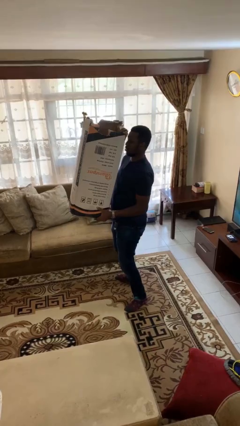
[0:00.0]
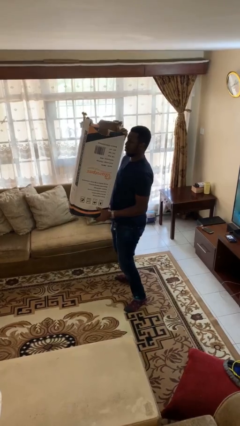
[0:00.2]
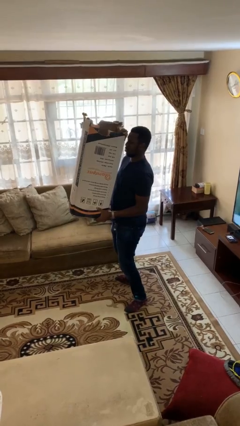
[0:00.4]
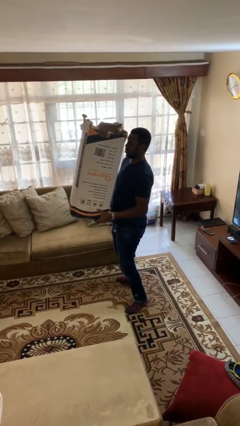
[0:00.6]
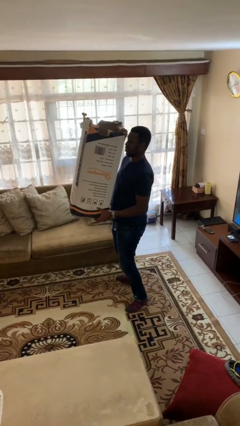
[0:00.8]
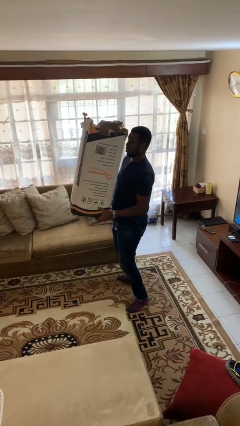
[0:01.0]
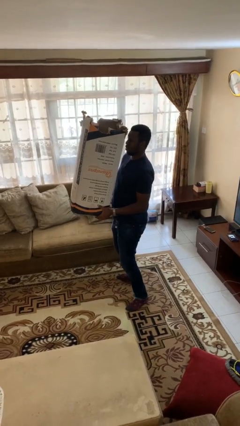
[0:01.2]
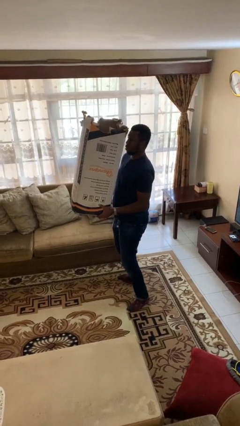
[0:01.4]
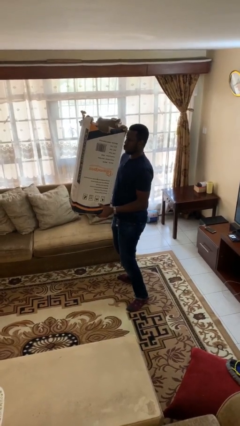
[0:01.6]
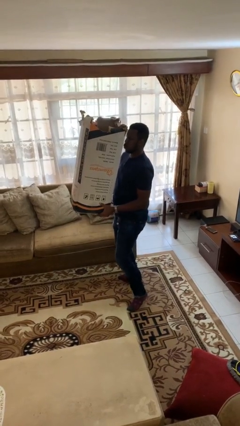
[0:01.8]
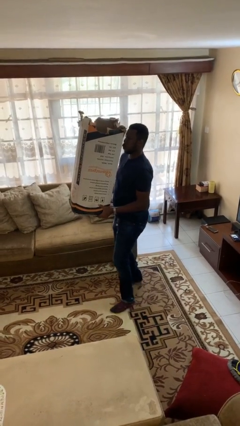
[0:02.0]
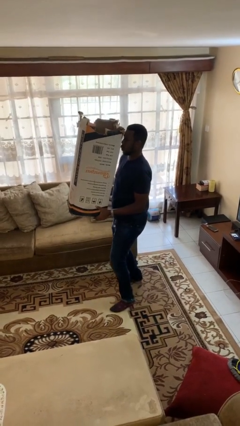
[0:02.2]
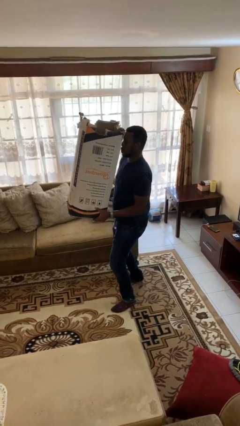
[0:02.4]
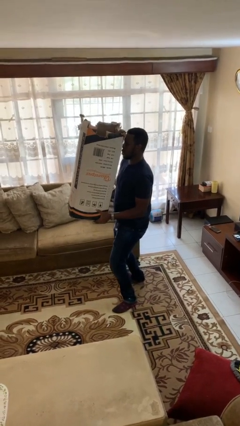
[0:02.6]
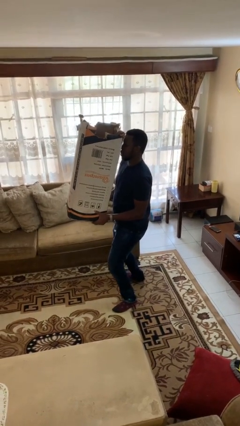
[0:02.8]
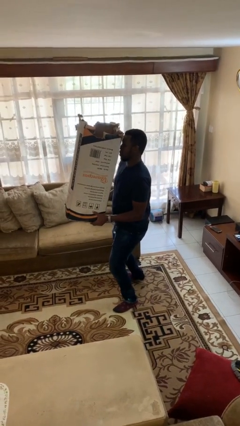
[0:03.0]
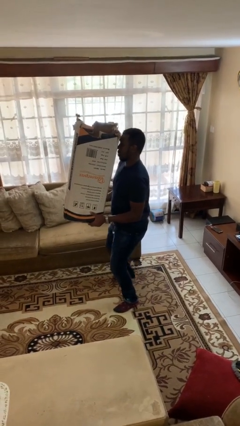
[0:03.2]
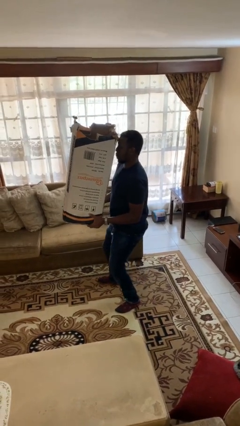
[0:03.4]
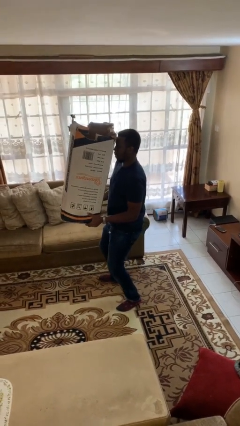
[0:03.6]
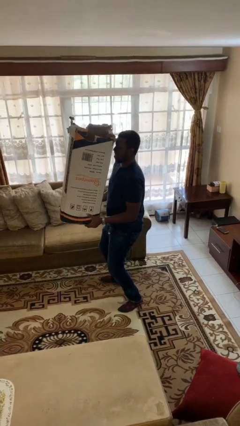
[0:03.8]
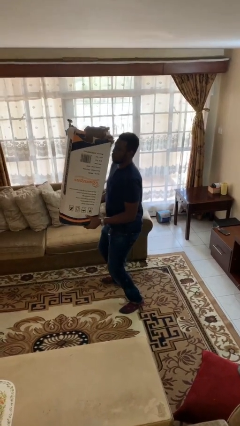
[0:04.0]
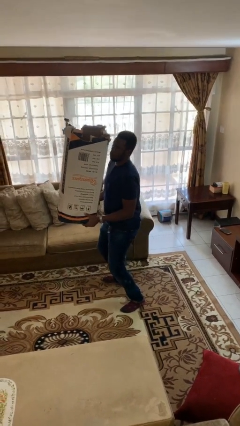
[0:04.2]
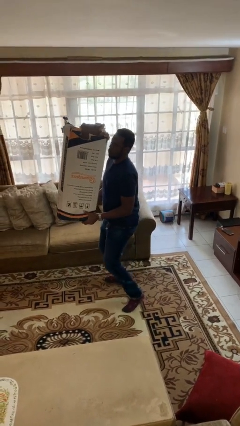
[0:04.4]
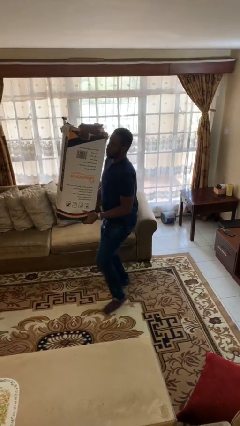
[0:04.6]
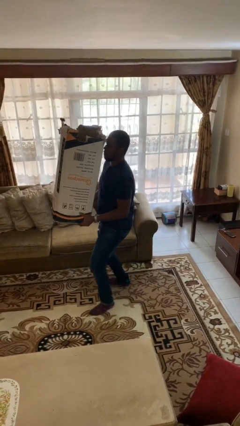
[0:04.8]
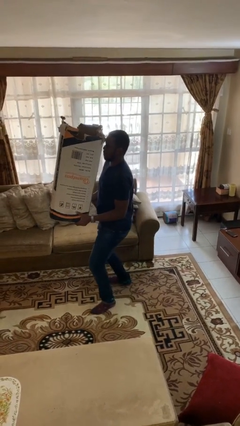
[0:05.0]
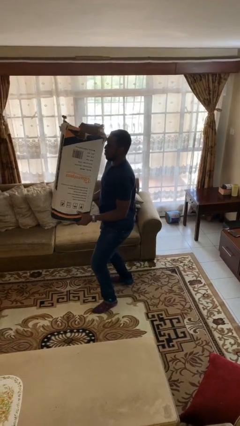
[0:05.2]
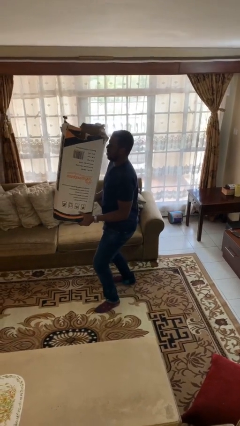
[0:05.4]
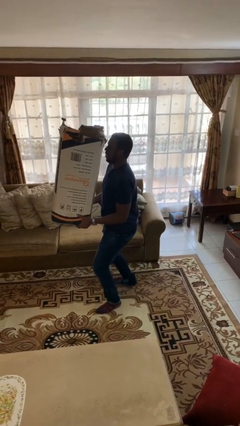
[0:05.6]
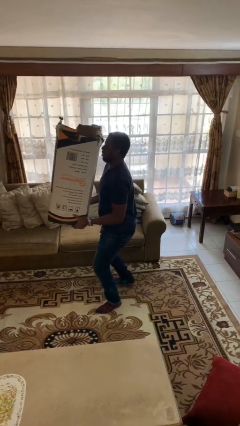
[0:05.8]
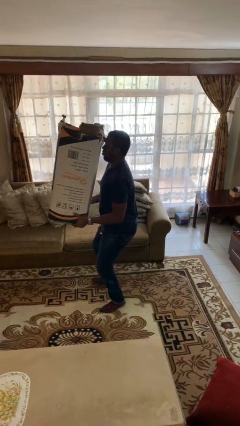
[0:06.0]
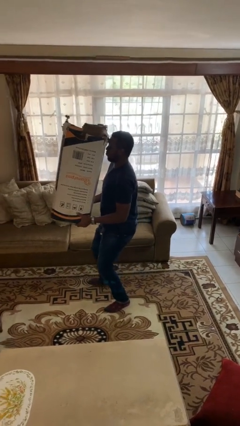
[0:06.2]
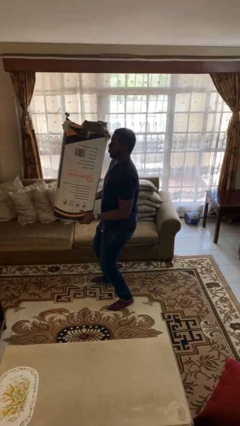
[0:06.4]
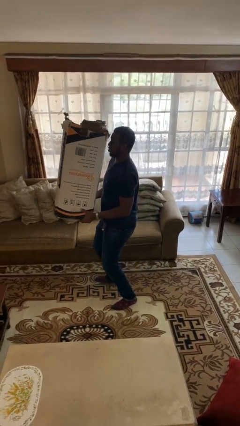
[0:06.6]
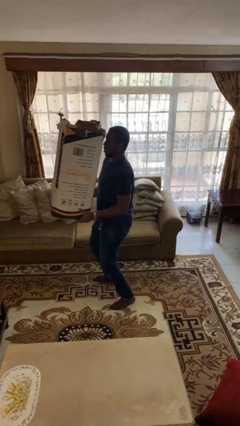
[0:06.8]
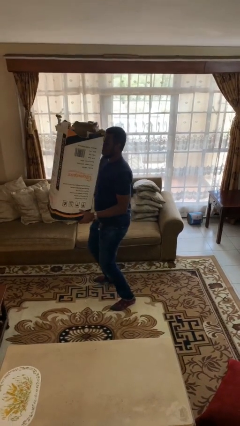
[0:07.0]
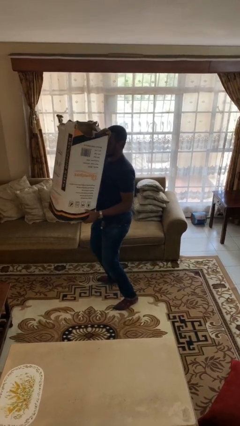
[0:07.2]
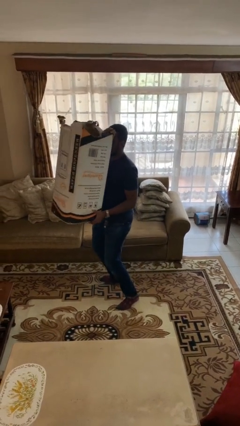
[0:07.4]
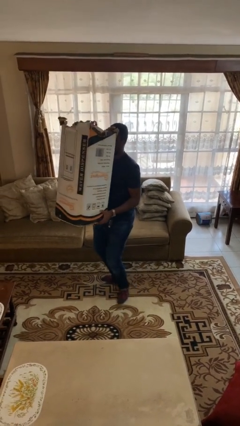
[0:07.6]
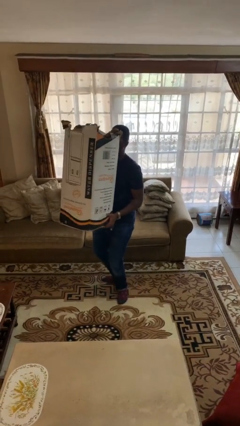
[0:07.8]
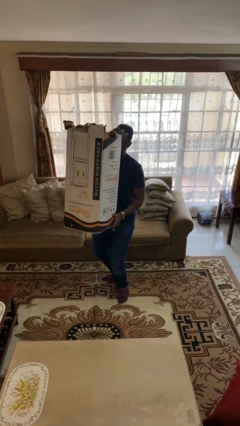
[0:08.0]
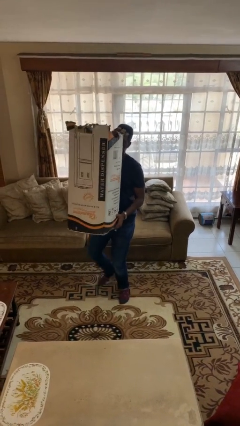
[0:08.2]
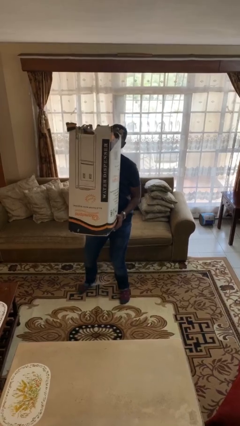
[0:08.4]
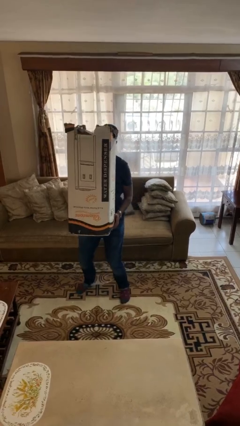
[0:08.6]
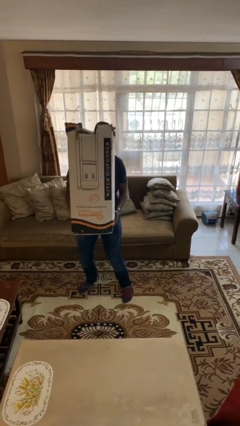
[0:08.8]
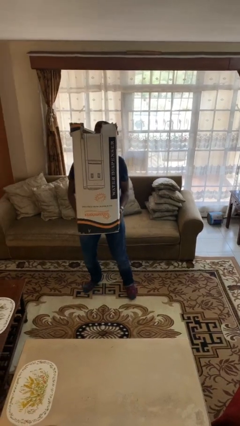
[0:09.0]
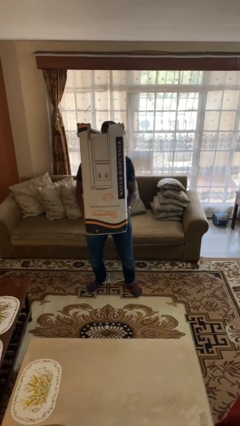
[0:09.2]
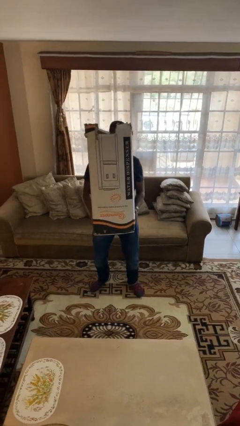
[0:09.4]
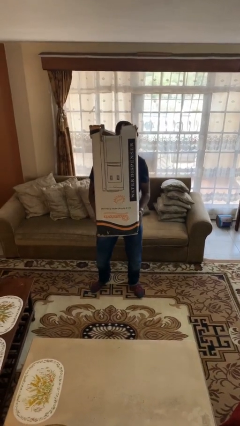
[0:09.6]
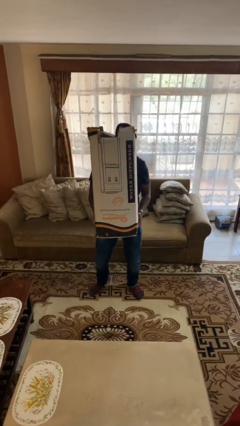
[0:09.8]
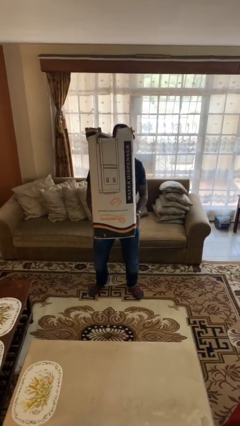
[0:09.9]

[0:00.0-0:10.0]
person carries heavy object

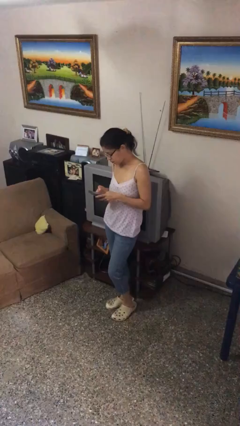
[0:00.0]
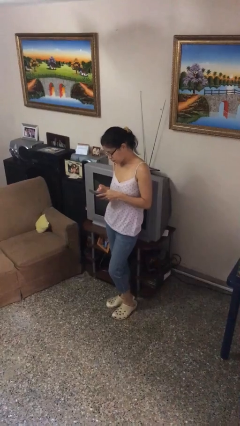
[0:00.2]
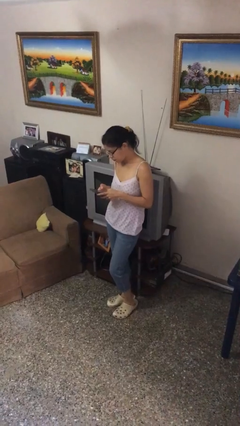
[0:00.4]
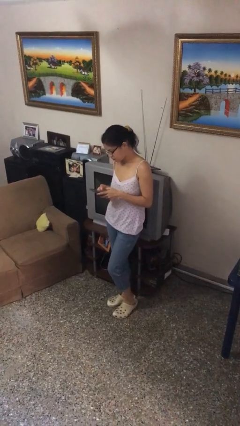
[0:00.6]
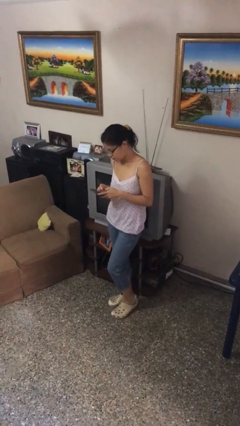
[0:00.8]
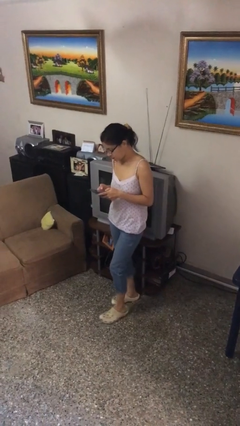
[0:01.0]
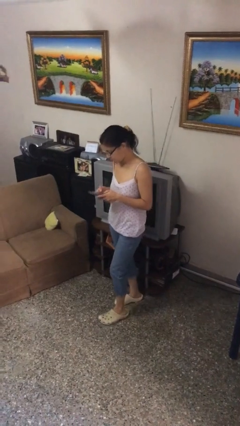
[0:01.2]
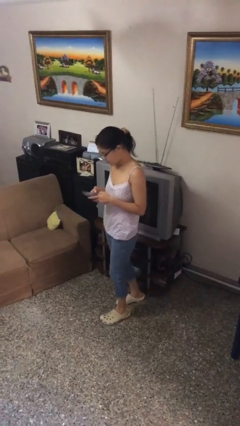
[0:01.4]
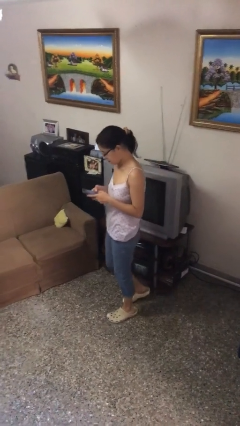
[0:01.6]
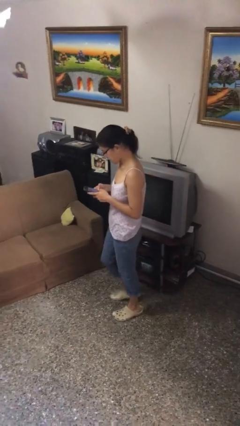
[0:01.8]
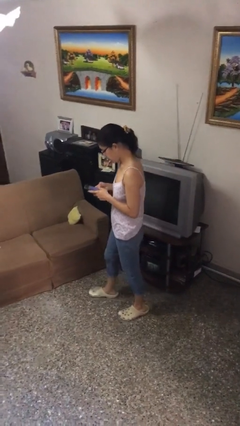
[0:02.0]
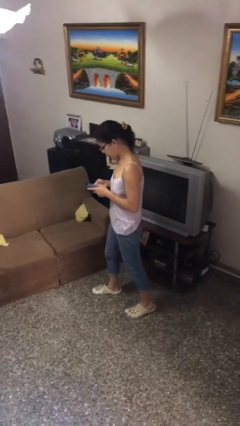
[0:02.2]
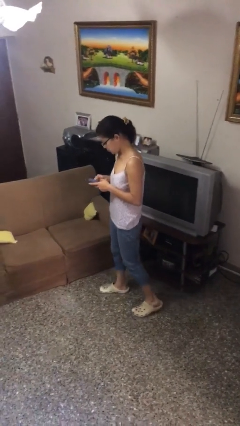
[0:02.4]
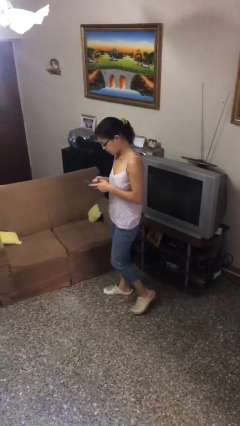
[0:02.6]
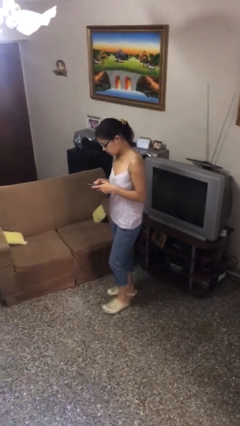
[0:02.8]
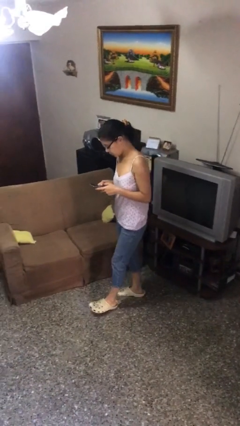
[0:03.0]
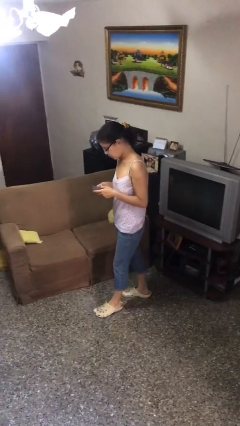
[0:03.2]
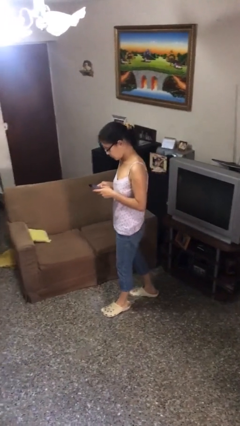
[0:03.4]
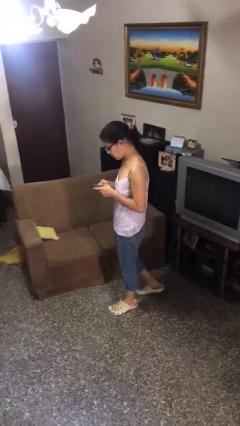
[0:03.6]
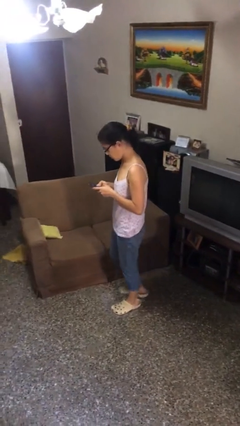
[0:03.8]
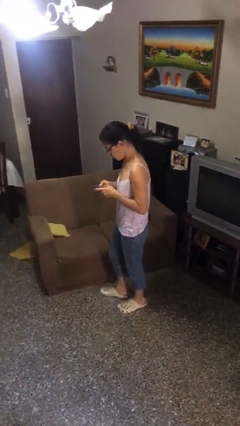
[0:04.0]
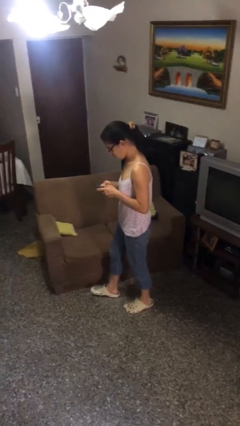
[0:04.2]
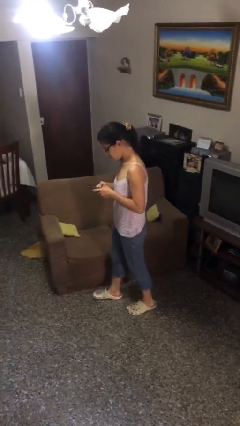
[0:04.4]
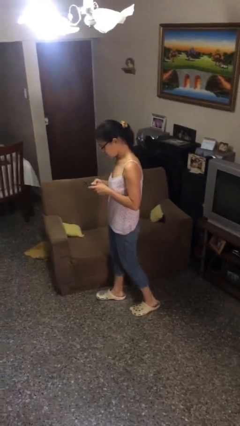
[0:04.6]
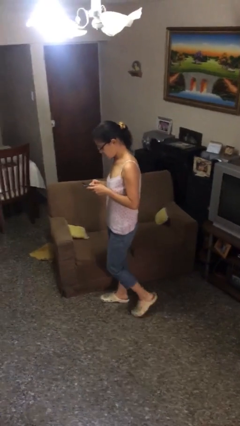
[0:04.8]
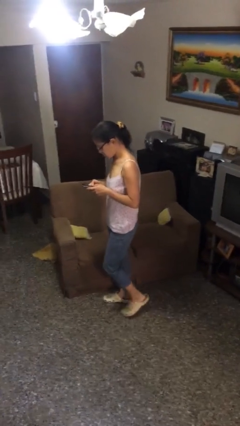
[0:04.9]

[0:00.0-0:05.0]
person texts on phone

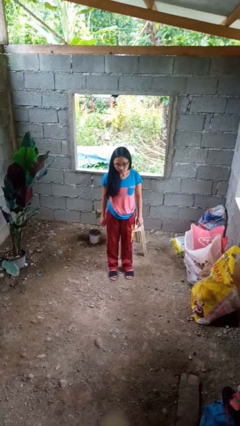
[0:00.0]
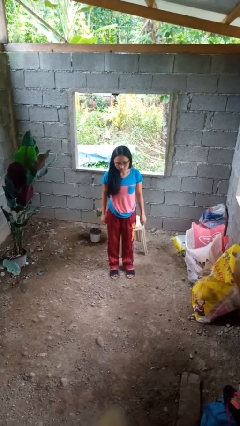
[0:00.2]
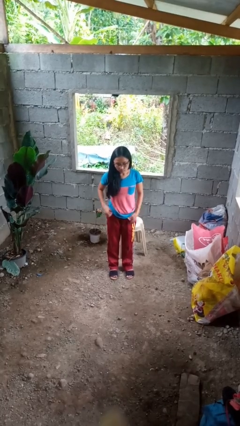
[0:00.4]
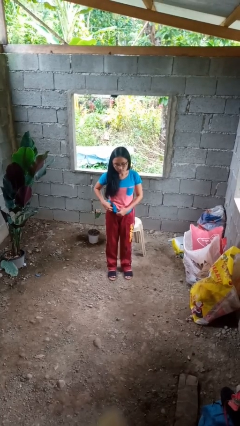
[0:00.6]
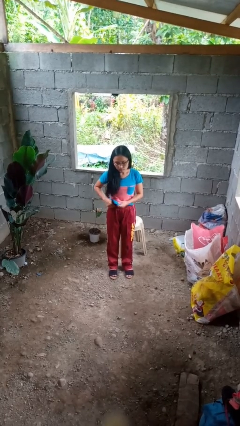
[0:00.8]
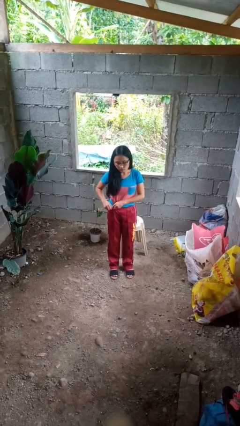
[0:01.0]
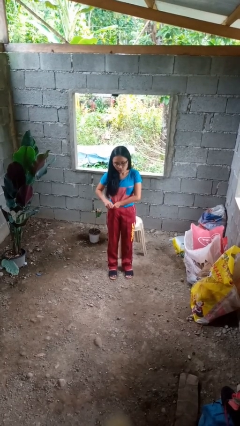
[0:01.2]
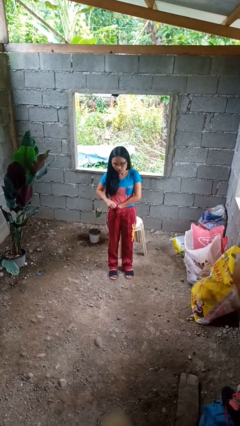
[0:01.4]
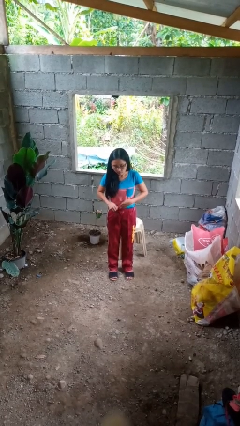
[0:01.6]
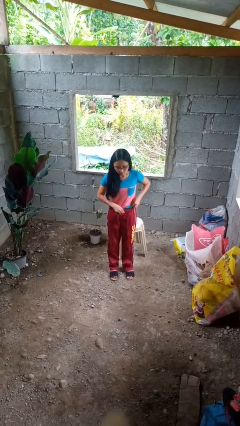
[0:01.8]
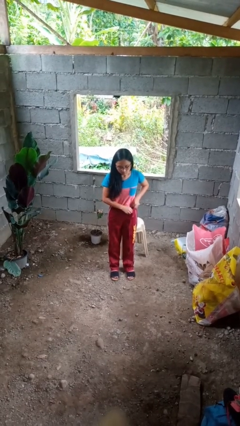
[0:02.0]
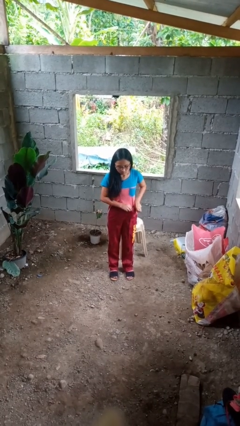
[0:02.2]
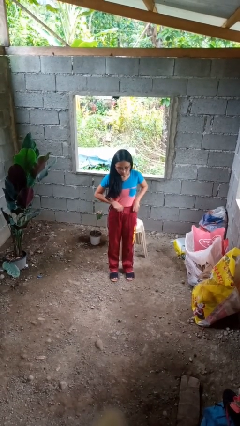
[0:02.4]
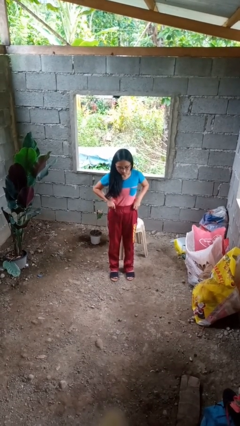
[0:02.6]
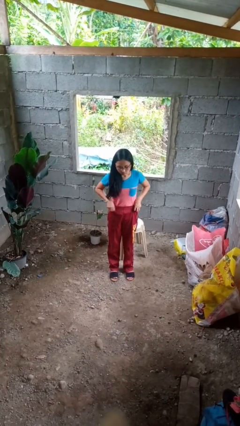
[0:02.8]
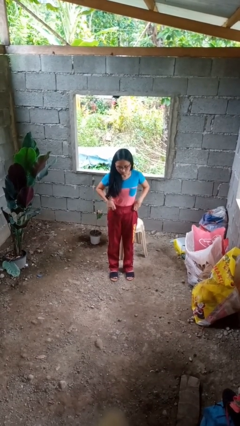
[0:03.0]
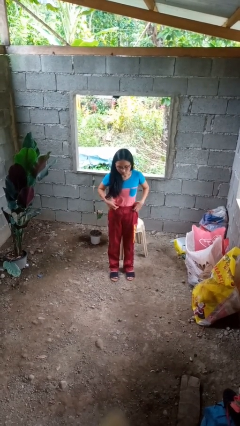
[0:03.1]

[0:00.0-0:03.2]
person tucks in shirt
